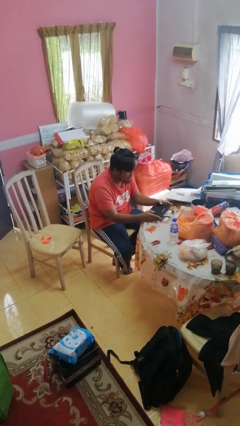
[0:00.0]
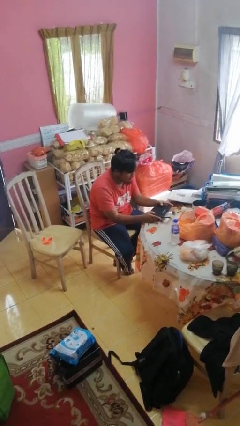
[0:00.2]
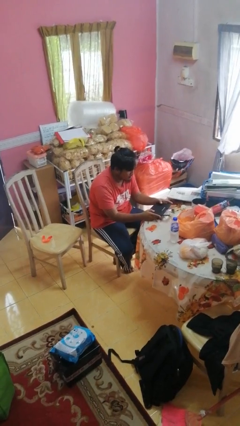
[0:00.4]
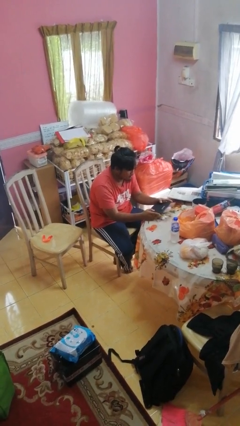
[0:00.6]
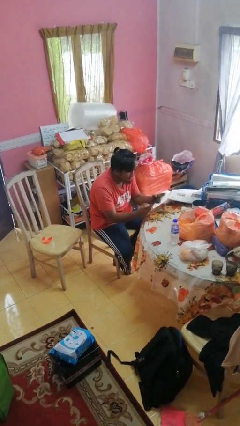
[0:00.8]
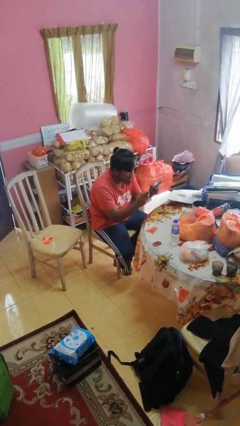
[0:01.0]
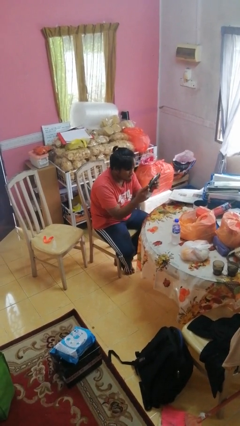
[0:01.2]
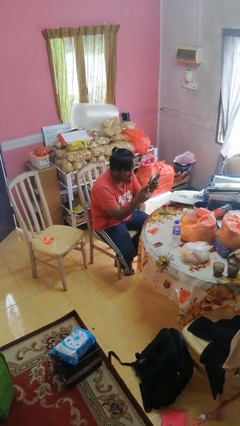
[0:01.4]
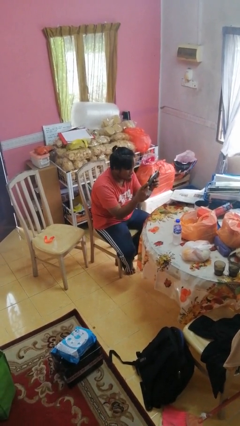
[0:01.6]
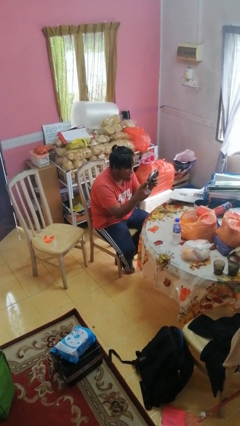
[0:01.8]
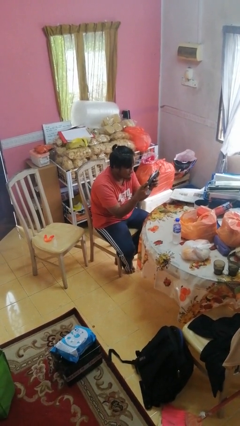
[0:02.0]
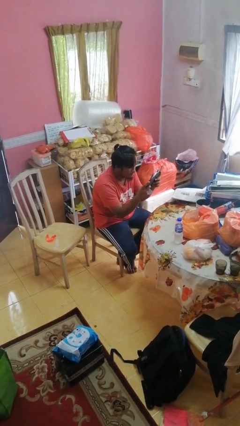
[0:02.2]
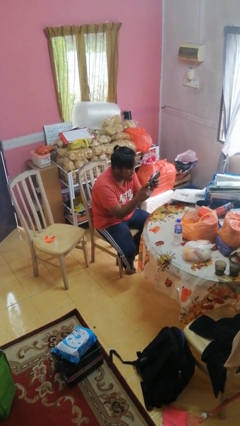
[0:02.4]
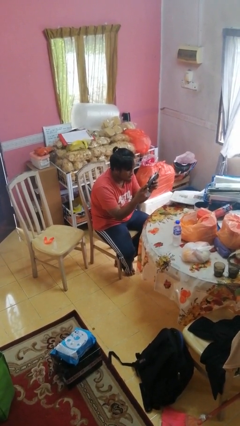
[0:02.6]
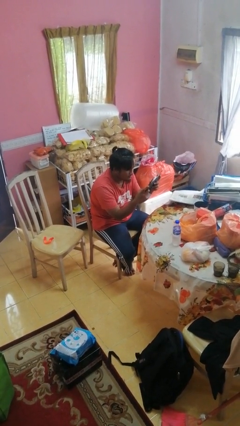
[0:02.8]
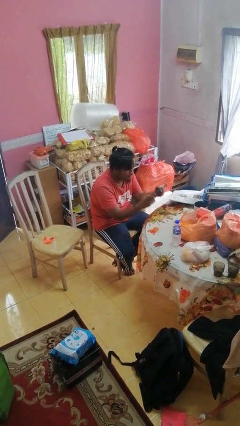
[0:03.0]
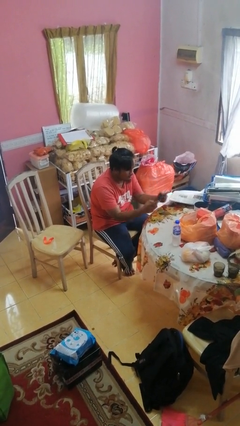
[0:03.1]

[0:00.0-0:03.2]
person interacts with handheld game

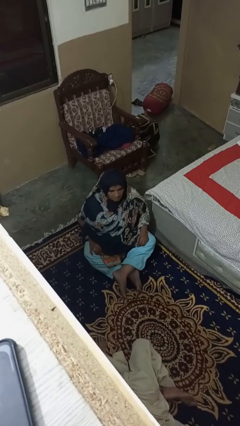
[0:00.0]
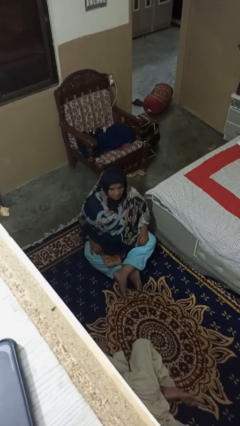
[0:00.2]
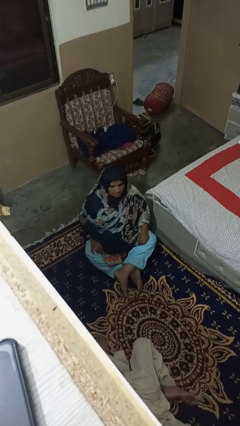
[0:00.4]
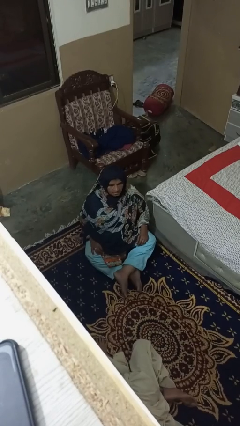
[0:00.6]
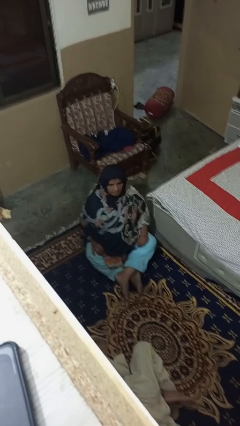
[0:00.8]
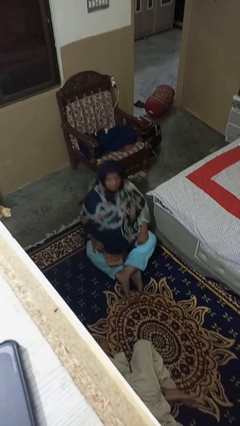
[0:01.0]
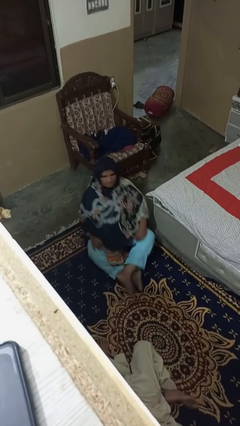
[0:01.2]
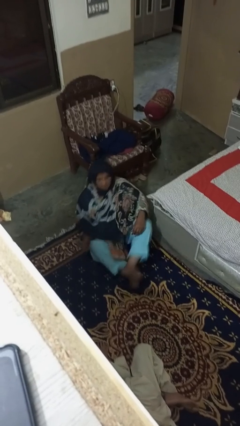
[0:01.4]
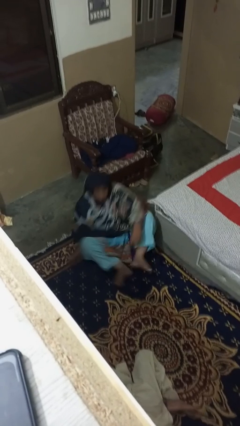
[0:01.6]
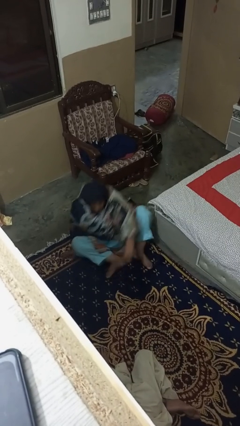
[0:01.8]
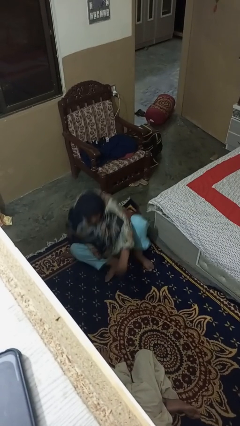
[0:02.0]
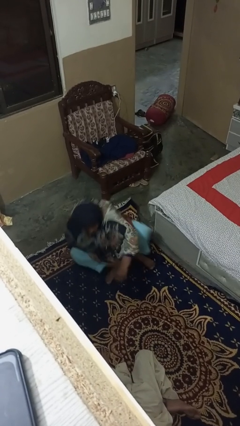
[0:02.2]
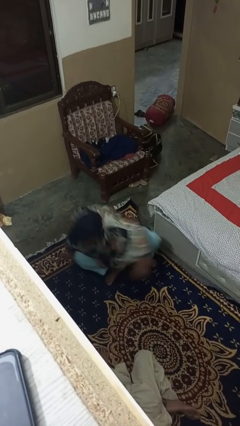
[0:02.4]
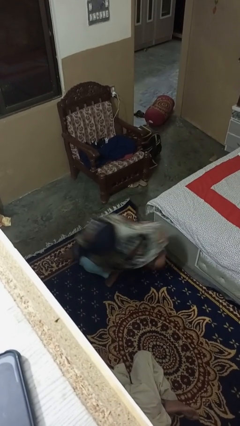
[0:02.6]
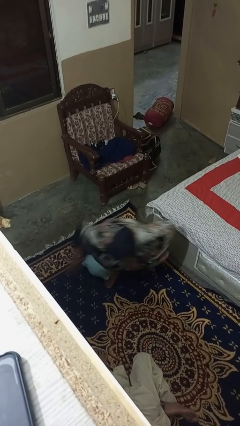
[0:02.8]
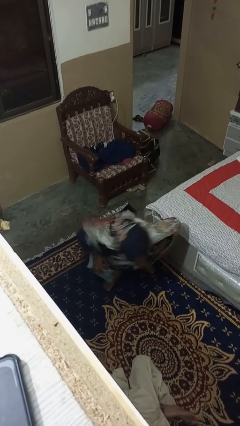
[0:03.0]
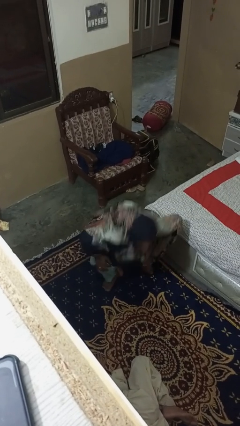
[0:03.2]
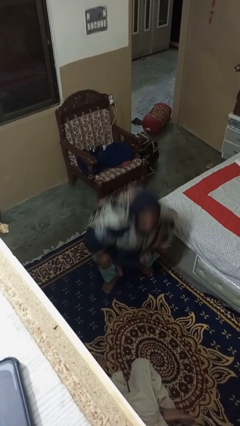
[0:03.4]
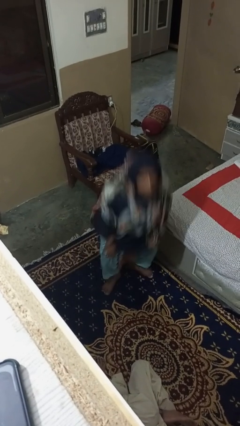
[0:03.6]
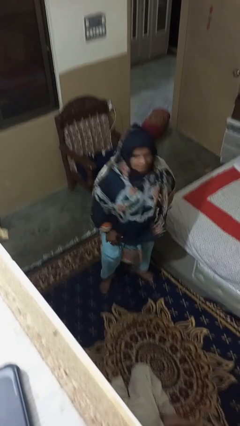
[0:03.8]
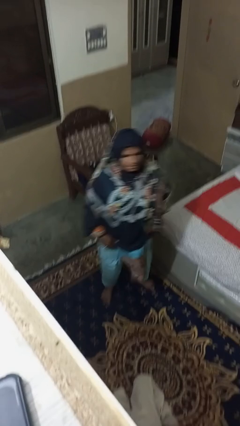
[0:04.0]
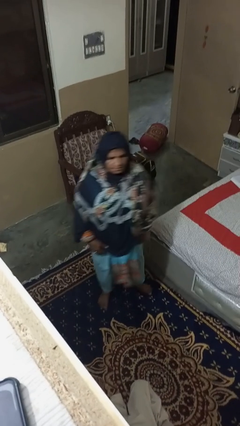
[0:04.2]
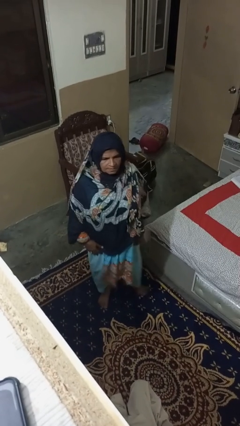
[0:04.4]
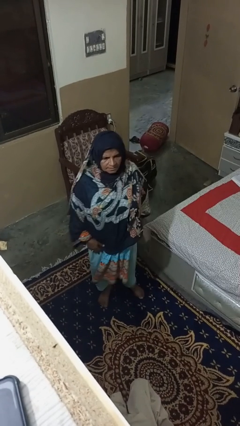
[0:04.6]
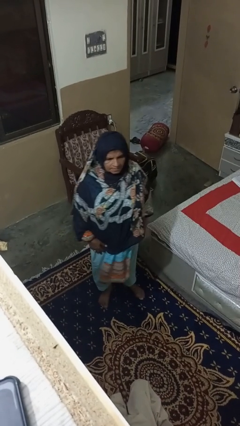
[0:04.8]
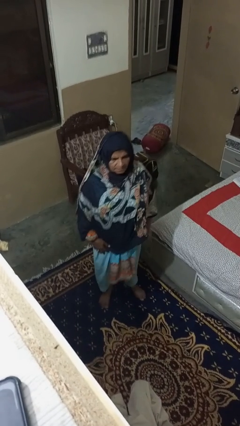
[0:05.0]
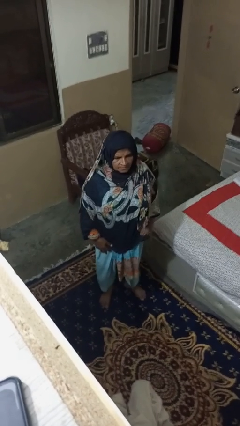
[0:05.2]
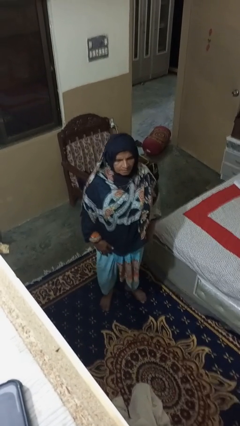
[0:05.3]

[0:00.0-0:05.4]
person stands up from floor

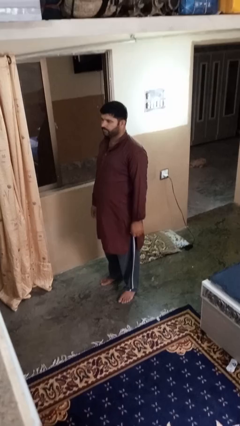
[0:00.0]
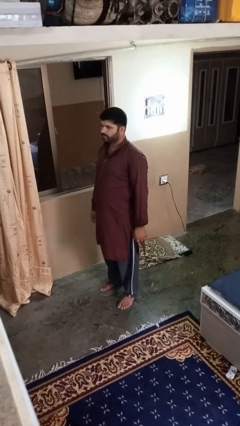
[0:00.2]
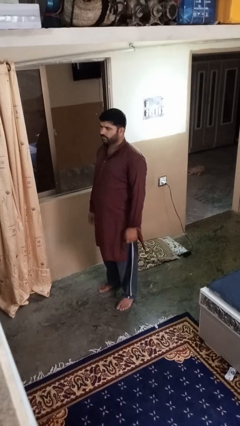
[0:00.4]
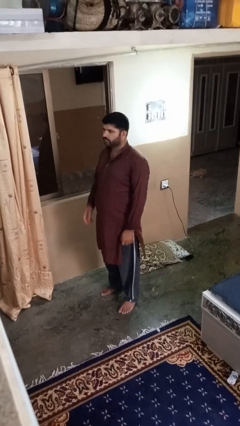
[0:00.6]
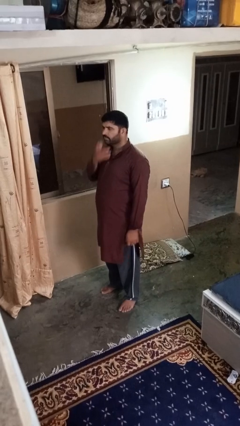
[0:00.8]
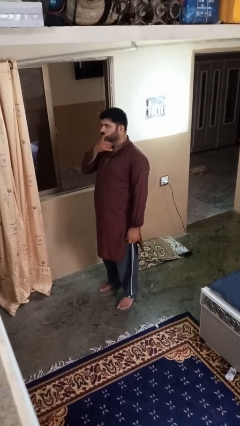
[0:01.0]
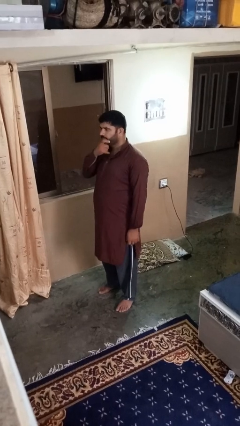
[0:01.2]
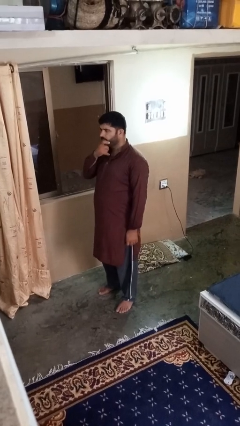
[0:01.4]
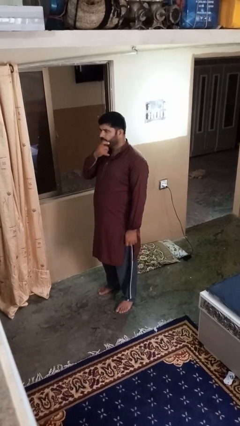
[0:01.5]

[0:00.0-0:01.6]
person strokes chin

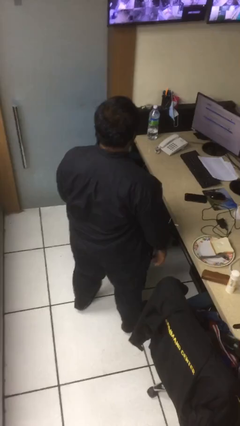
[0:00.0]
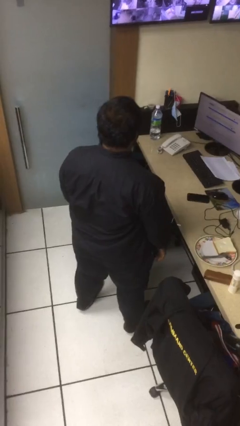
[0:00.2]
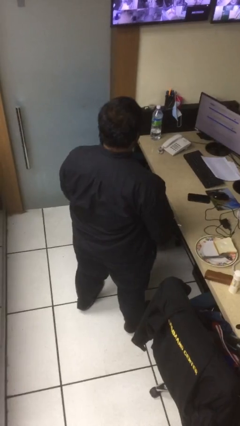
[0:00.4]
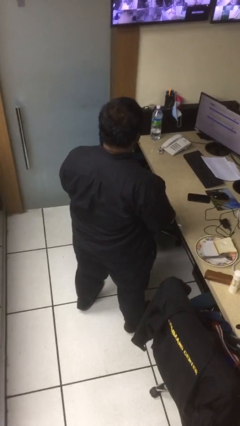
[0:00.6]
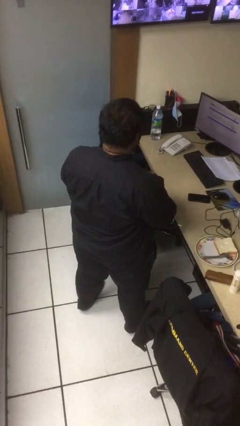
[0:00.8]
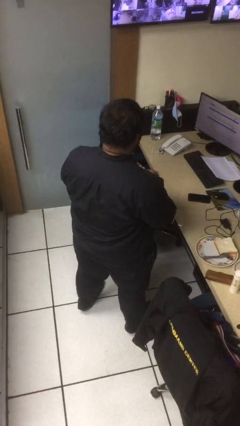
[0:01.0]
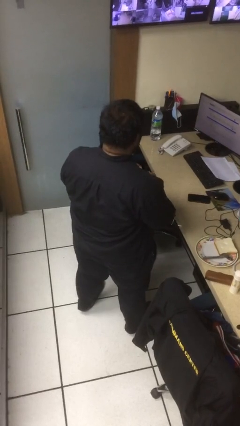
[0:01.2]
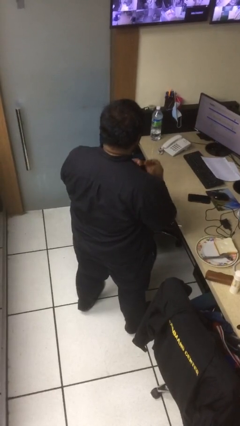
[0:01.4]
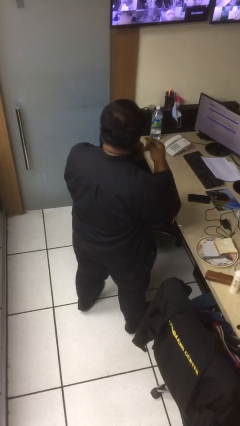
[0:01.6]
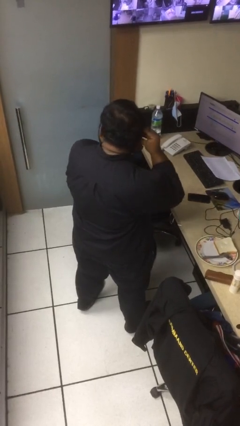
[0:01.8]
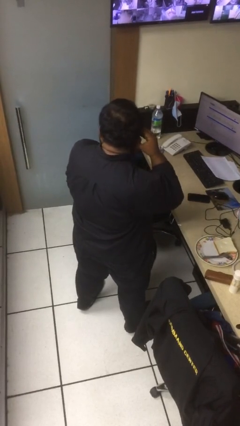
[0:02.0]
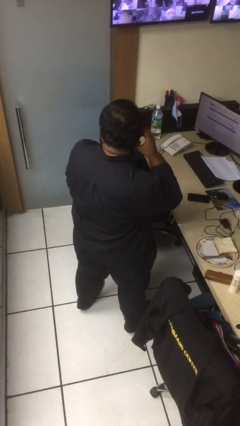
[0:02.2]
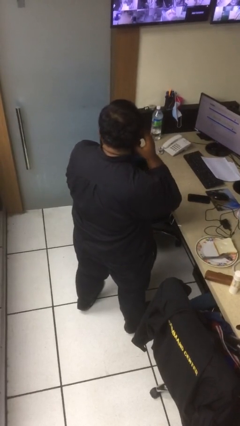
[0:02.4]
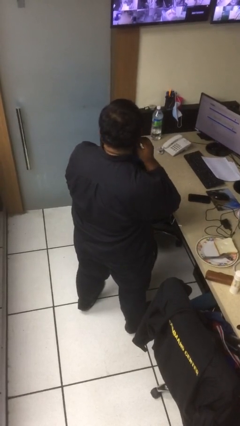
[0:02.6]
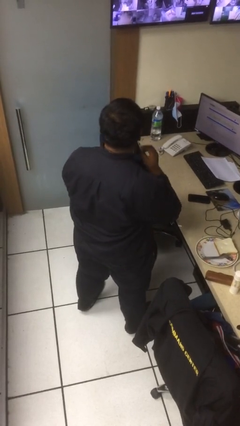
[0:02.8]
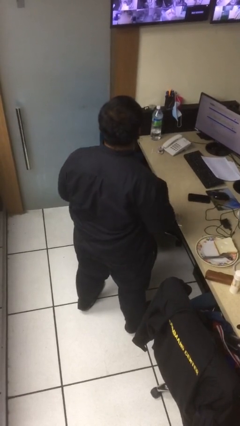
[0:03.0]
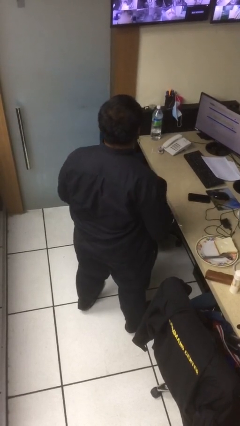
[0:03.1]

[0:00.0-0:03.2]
person puts on earrings

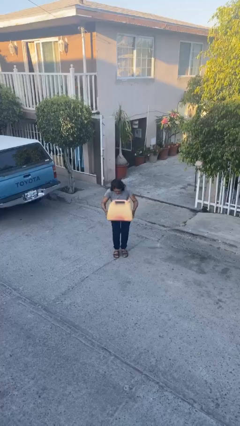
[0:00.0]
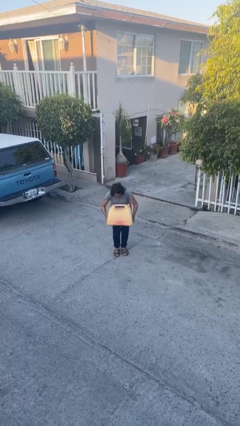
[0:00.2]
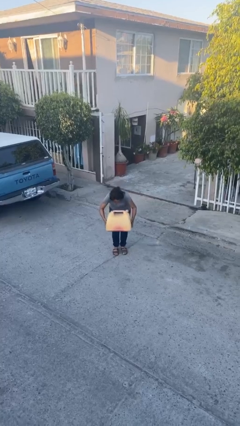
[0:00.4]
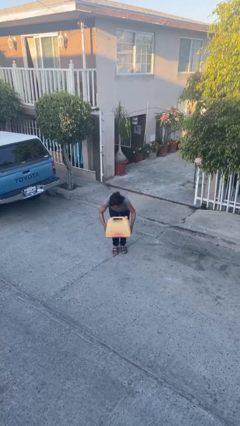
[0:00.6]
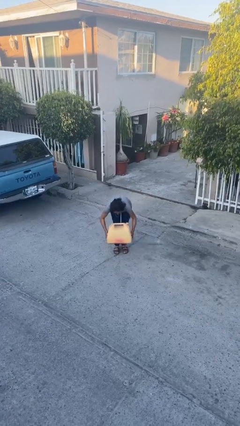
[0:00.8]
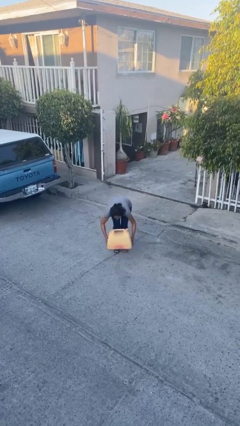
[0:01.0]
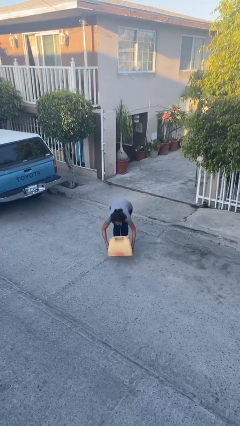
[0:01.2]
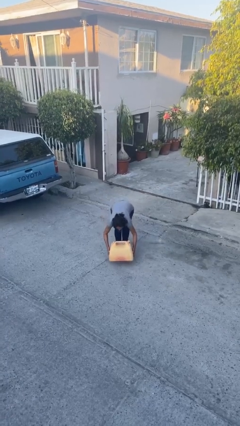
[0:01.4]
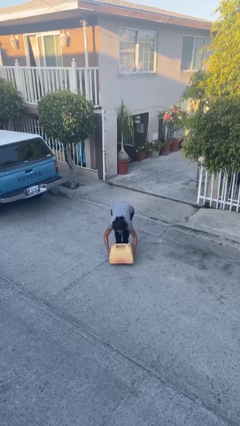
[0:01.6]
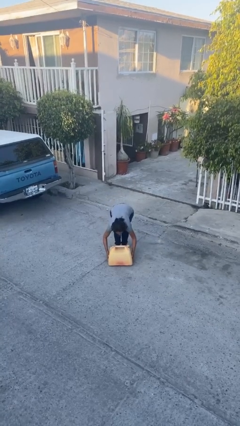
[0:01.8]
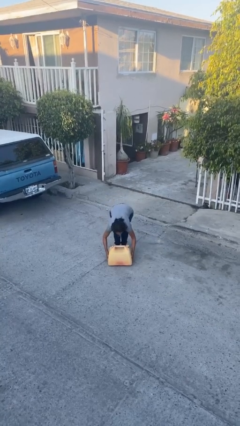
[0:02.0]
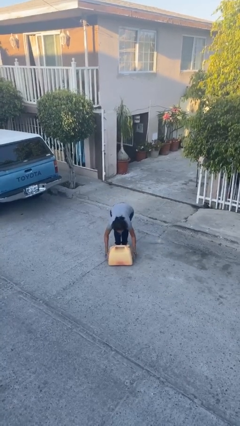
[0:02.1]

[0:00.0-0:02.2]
person puts down object on floor

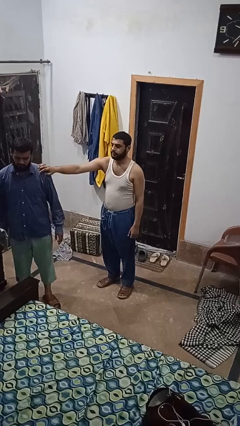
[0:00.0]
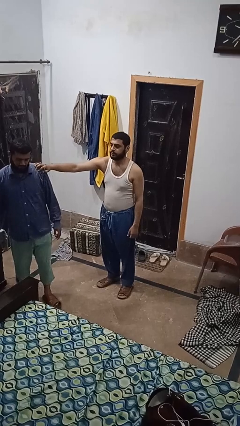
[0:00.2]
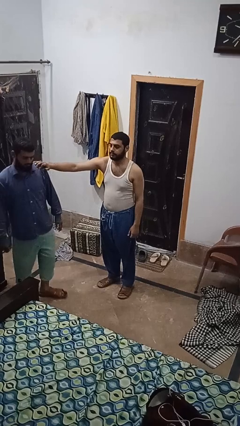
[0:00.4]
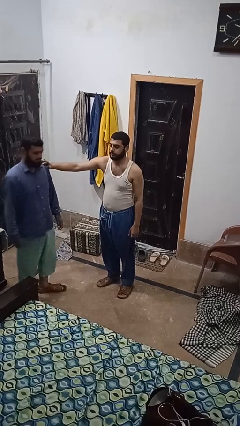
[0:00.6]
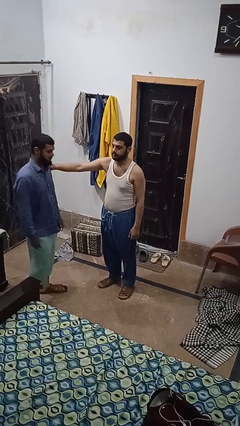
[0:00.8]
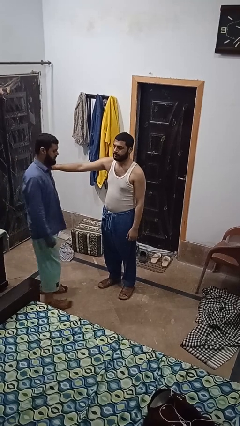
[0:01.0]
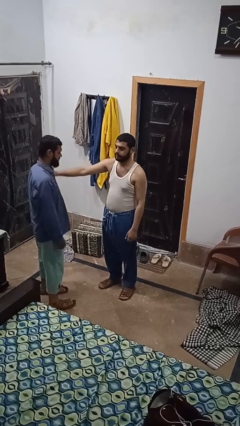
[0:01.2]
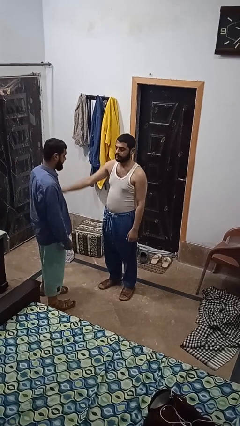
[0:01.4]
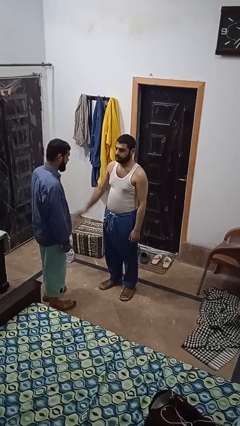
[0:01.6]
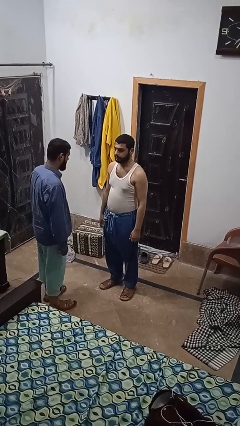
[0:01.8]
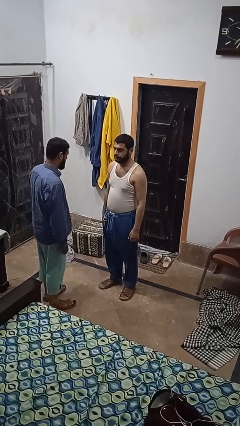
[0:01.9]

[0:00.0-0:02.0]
person spins person around
